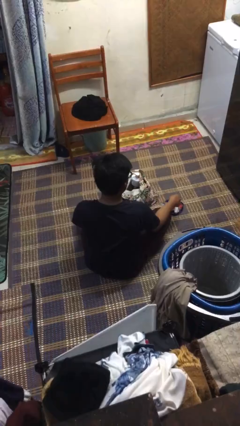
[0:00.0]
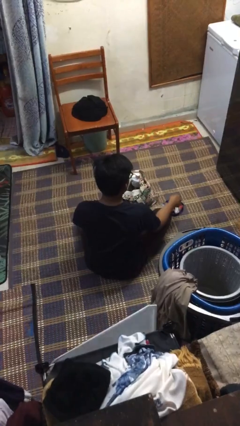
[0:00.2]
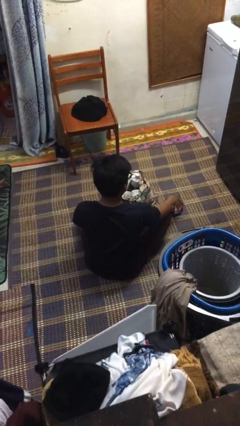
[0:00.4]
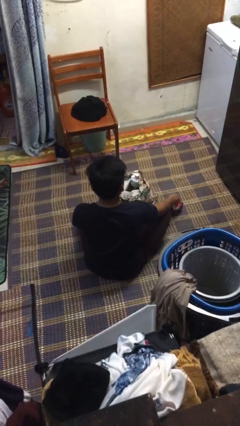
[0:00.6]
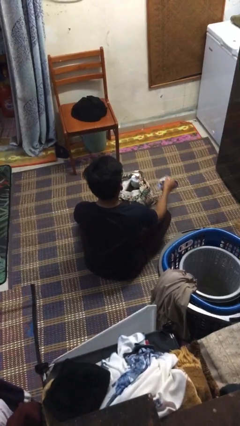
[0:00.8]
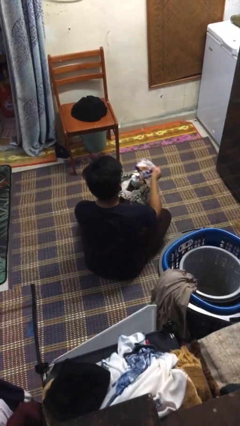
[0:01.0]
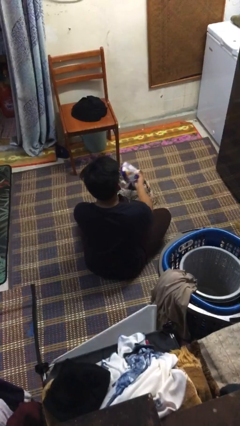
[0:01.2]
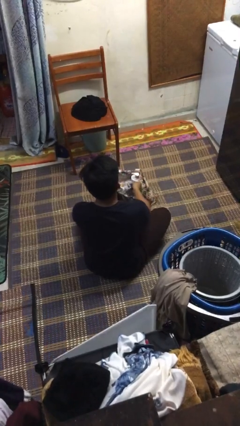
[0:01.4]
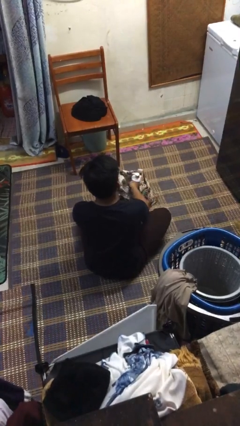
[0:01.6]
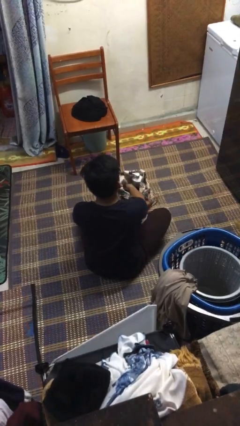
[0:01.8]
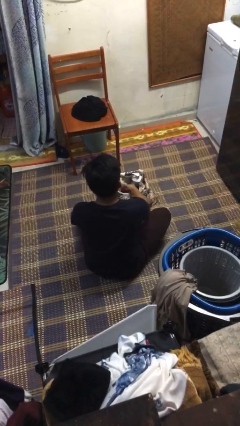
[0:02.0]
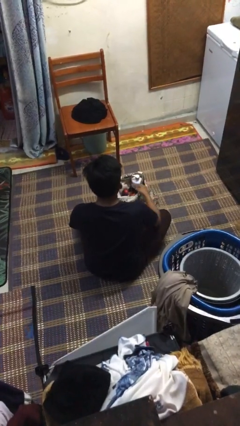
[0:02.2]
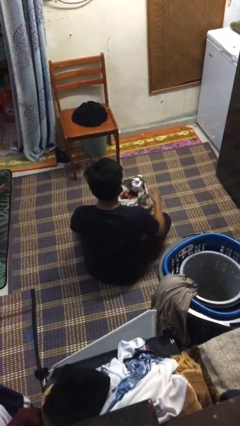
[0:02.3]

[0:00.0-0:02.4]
person puts object into bag

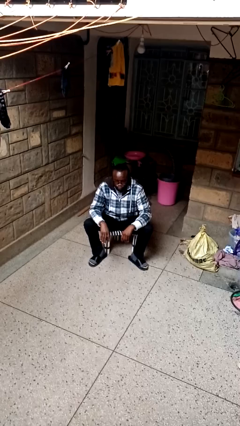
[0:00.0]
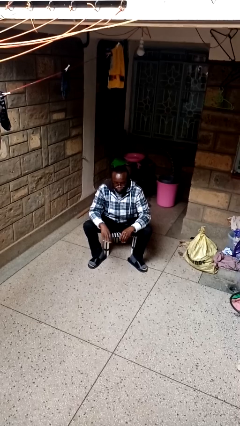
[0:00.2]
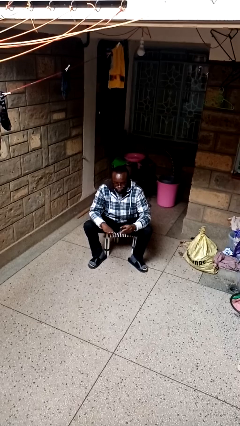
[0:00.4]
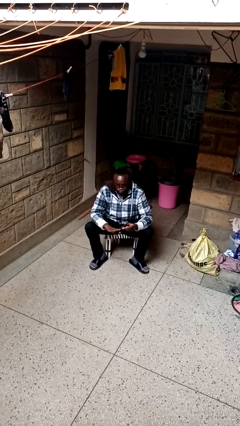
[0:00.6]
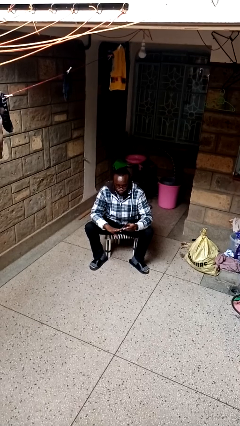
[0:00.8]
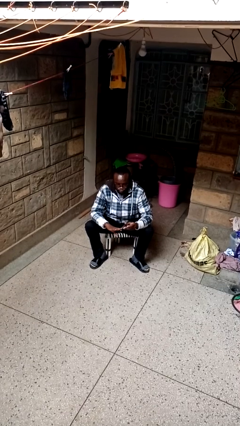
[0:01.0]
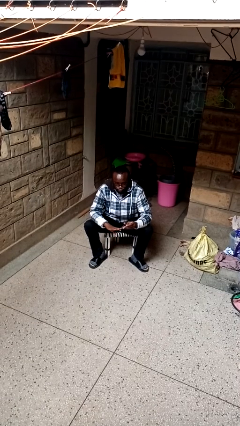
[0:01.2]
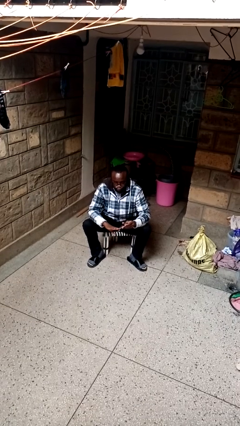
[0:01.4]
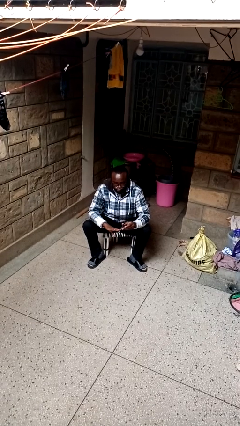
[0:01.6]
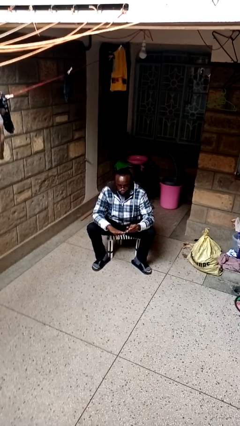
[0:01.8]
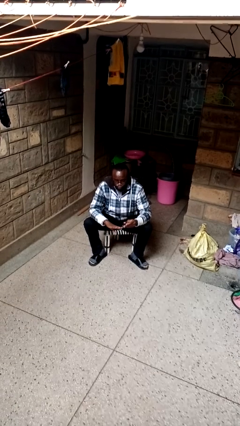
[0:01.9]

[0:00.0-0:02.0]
person clips fingernails

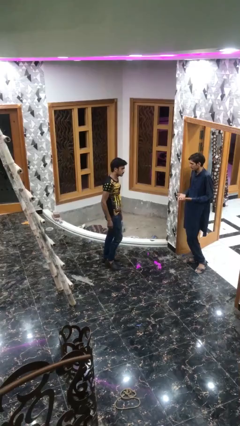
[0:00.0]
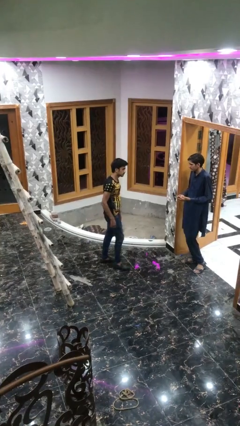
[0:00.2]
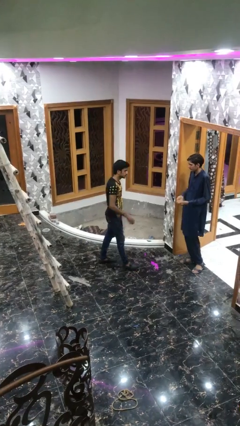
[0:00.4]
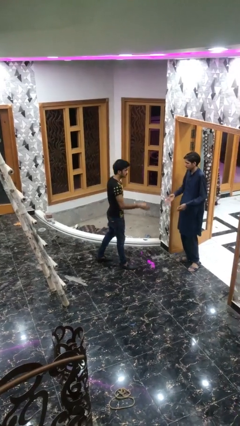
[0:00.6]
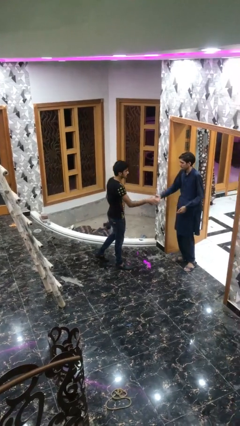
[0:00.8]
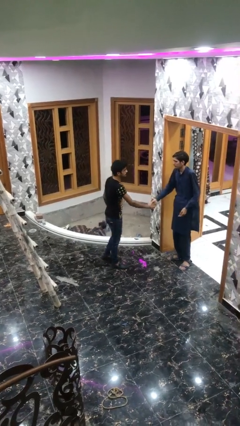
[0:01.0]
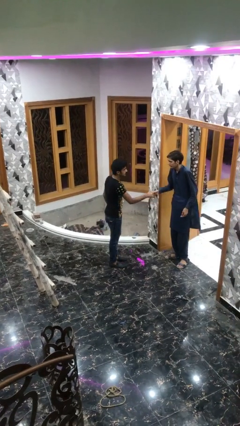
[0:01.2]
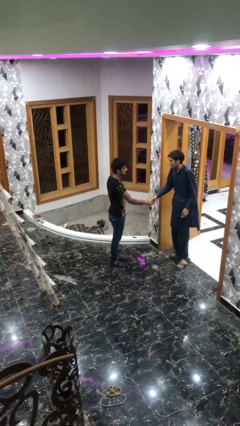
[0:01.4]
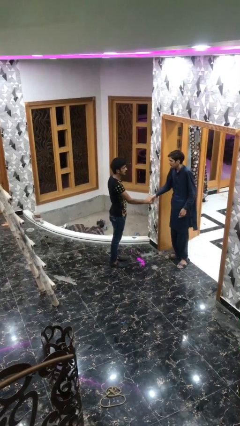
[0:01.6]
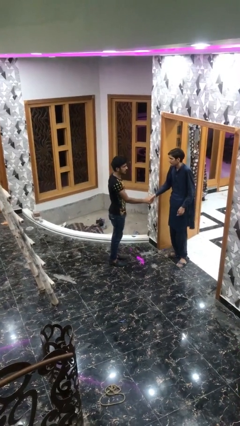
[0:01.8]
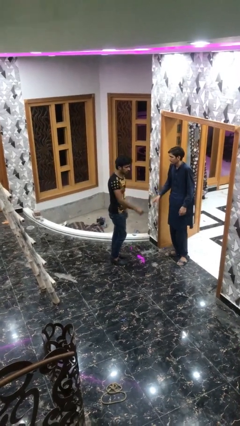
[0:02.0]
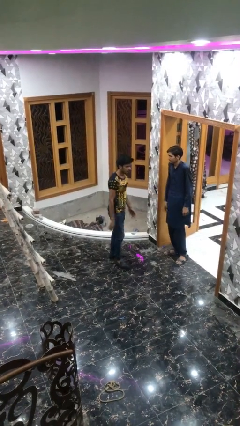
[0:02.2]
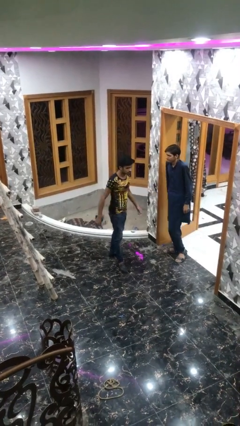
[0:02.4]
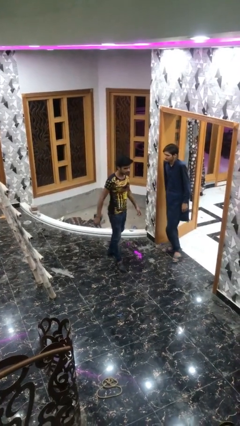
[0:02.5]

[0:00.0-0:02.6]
person shakes hand

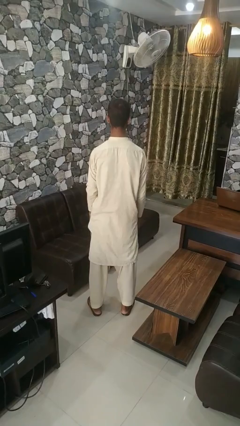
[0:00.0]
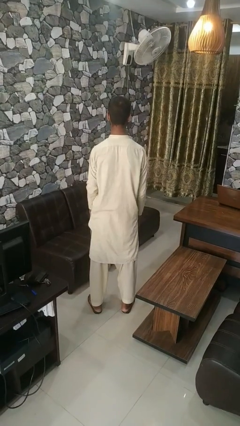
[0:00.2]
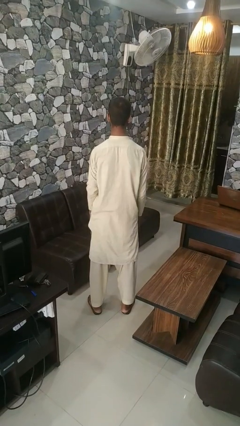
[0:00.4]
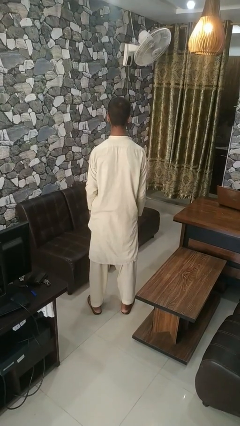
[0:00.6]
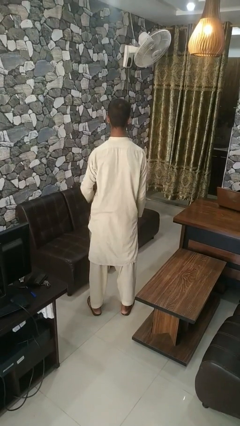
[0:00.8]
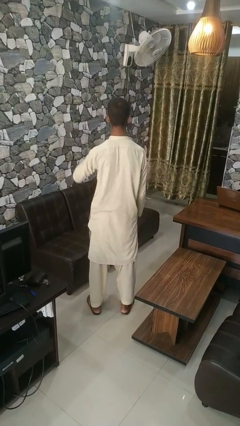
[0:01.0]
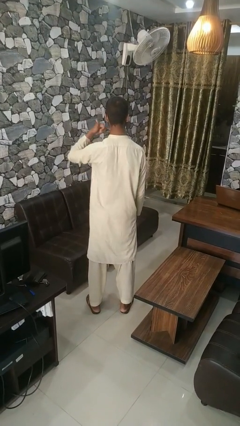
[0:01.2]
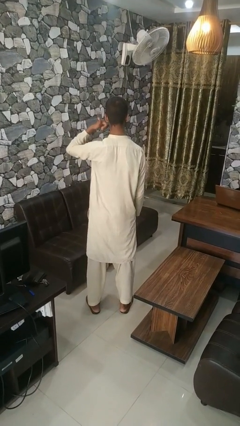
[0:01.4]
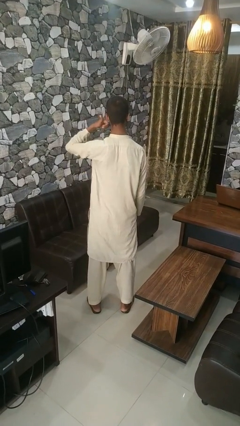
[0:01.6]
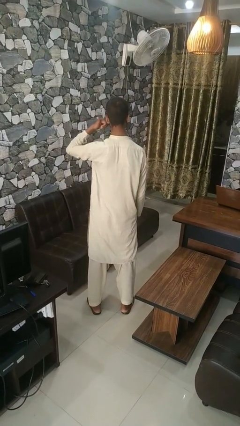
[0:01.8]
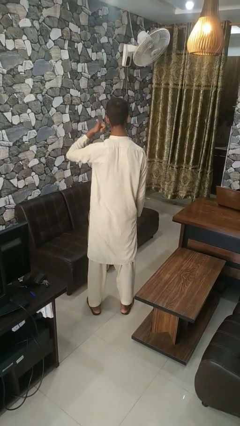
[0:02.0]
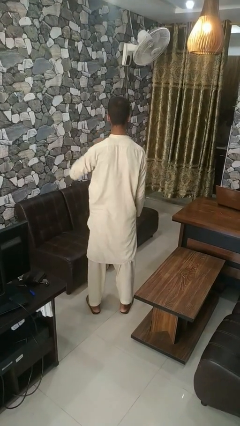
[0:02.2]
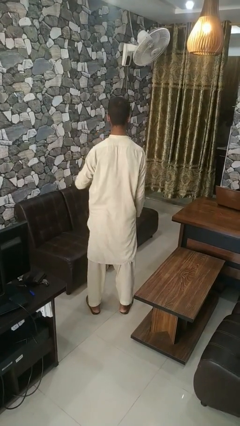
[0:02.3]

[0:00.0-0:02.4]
person gestures call me

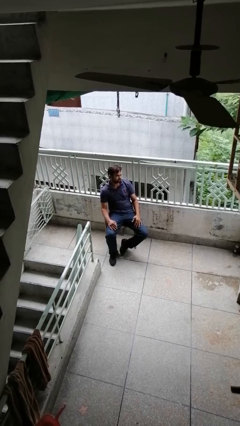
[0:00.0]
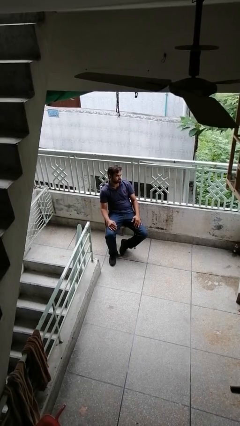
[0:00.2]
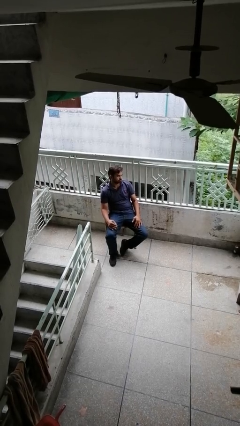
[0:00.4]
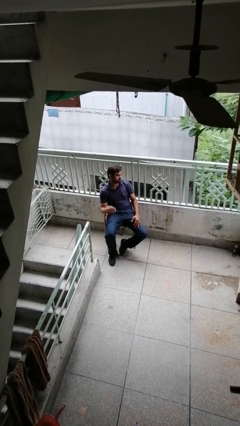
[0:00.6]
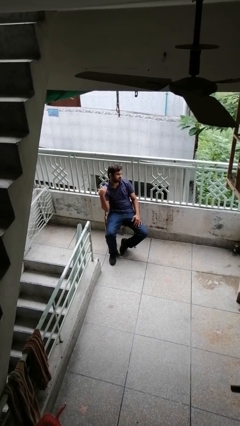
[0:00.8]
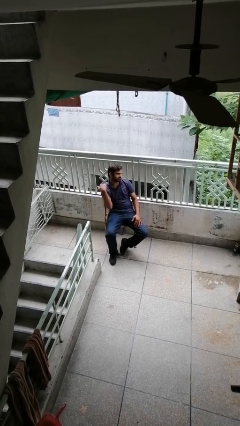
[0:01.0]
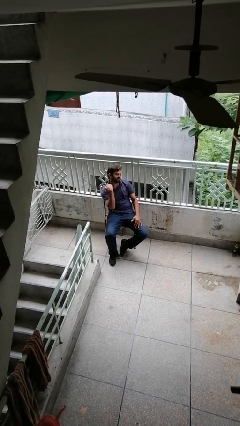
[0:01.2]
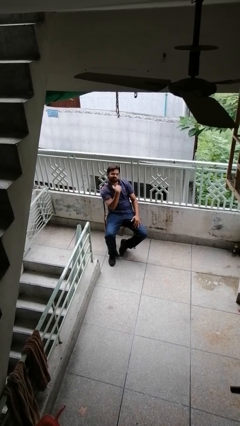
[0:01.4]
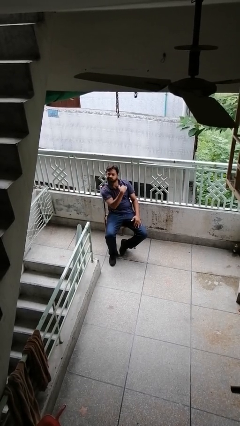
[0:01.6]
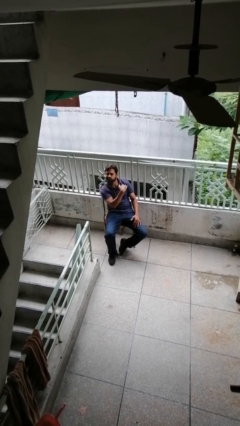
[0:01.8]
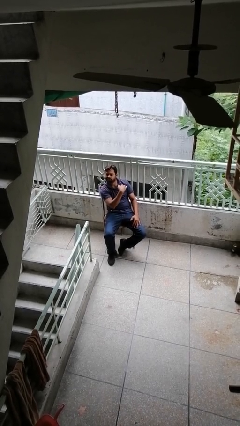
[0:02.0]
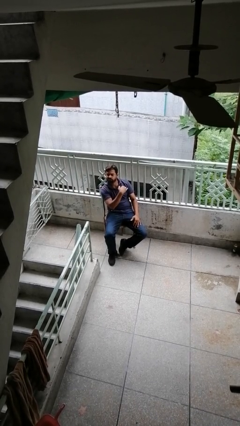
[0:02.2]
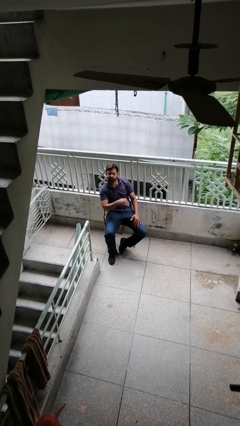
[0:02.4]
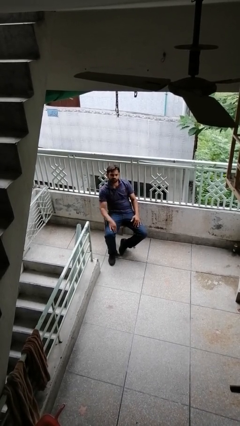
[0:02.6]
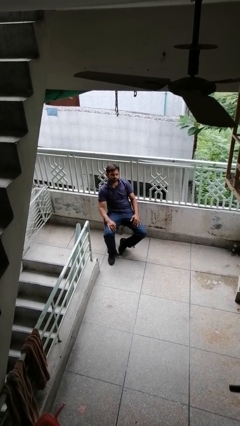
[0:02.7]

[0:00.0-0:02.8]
person gestures cut

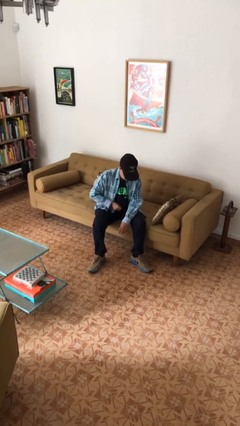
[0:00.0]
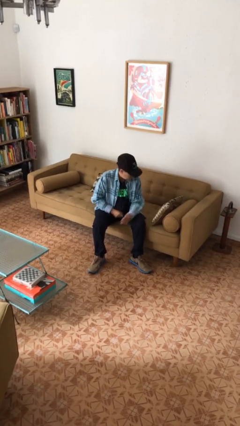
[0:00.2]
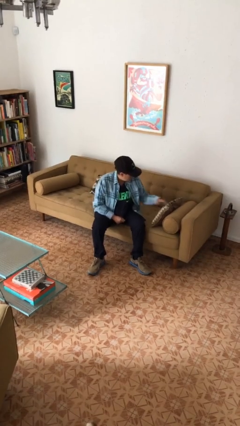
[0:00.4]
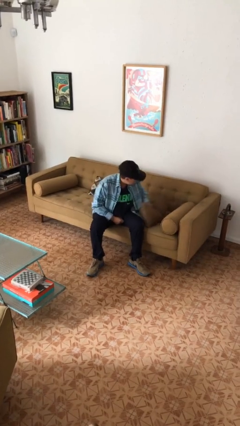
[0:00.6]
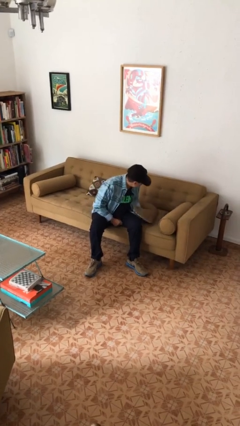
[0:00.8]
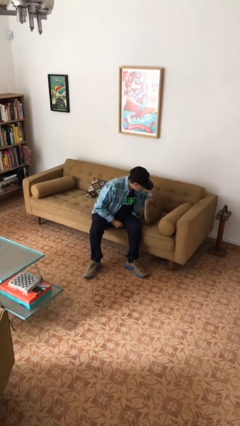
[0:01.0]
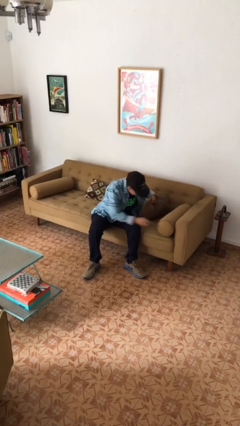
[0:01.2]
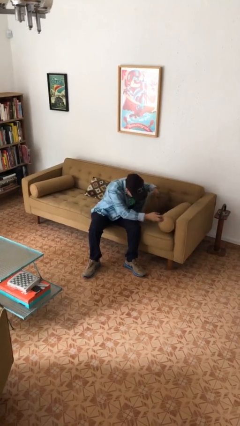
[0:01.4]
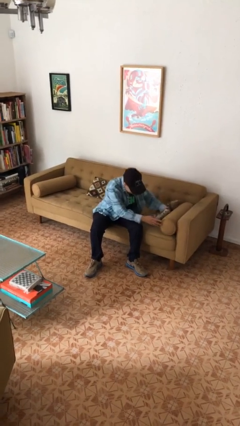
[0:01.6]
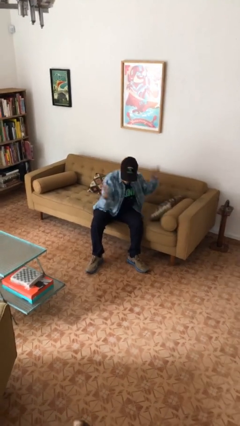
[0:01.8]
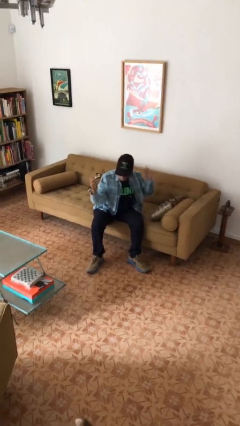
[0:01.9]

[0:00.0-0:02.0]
person searches in couch

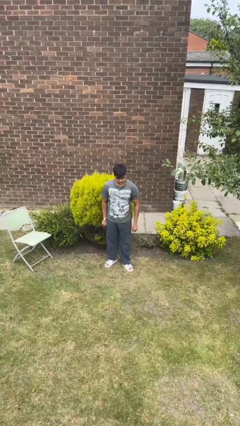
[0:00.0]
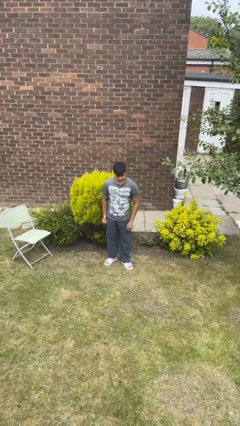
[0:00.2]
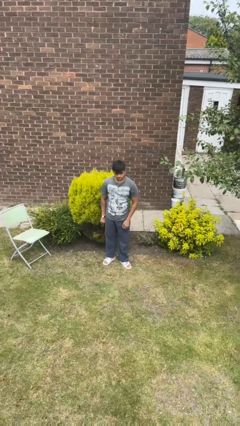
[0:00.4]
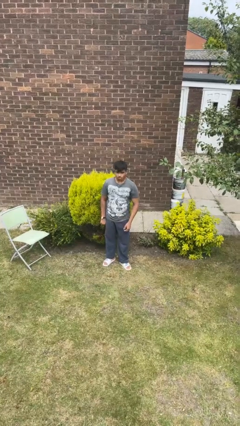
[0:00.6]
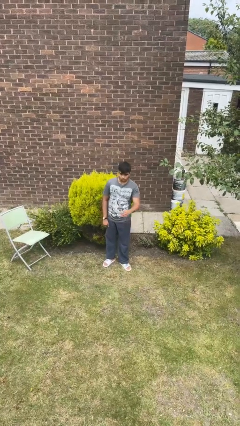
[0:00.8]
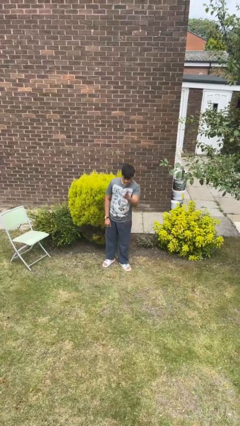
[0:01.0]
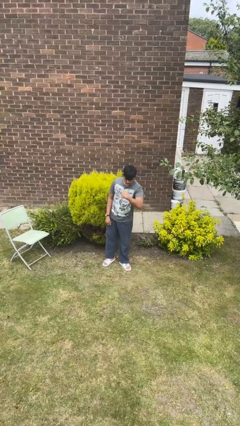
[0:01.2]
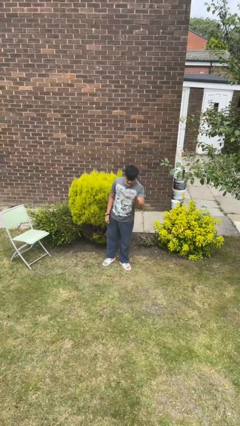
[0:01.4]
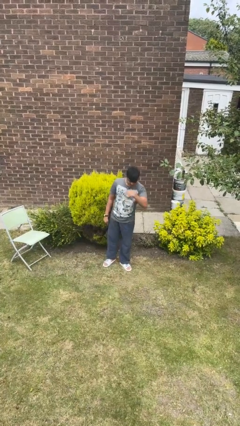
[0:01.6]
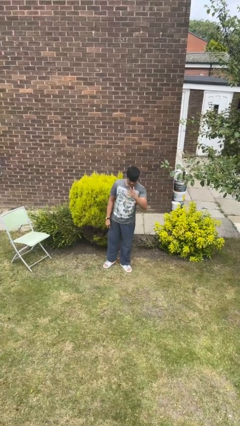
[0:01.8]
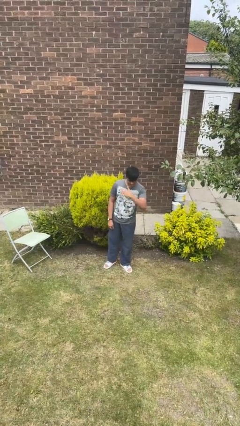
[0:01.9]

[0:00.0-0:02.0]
person gestures come here

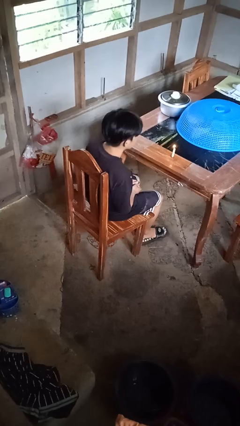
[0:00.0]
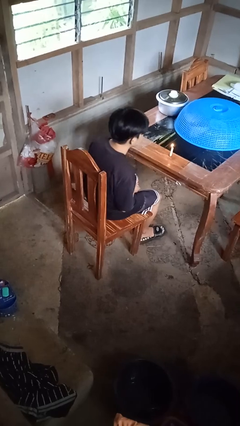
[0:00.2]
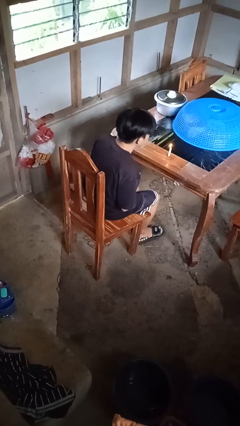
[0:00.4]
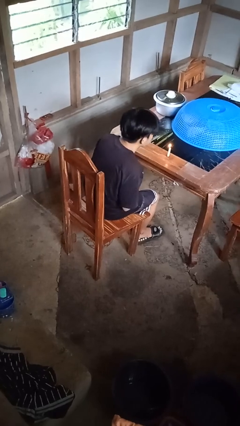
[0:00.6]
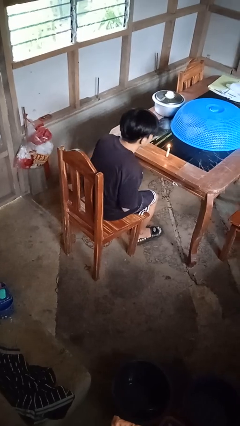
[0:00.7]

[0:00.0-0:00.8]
person extinguishes candle
